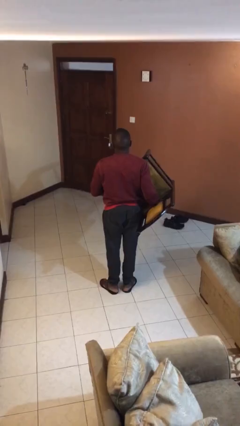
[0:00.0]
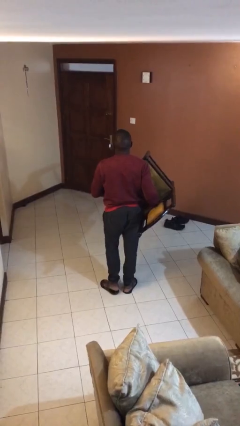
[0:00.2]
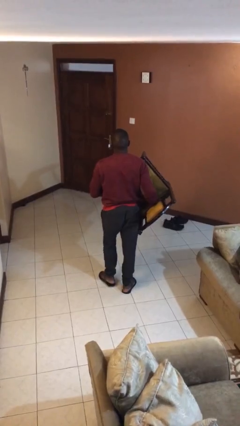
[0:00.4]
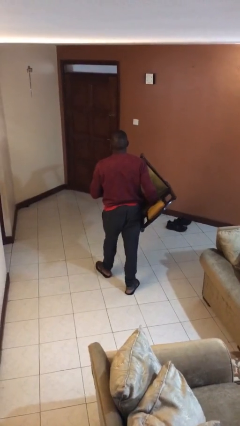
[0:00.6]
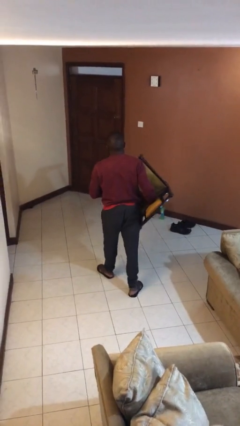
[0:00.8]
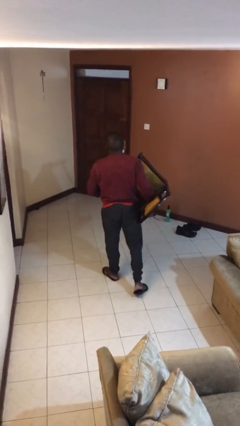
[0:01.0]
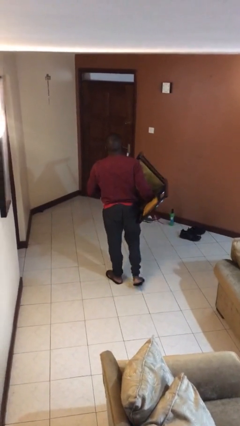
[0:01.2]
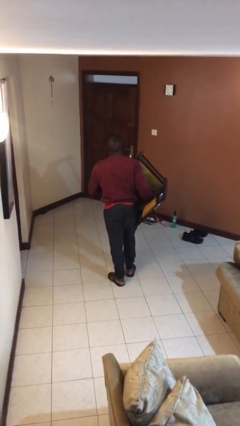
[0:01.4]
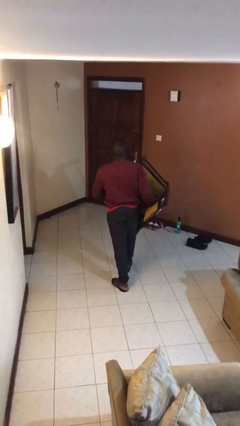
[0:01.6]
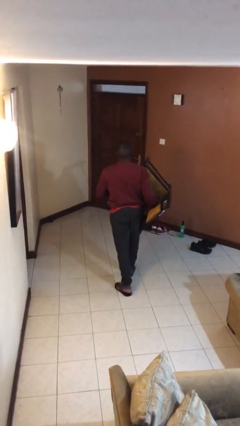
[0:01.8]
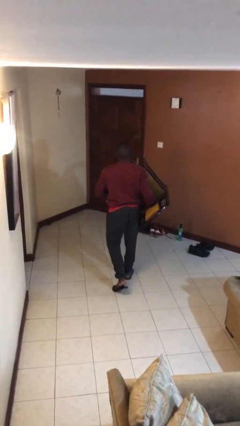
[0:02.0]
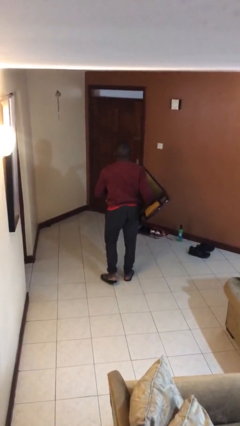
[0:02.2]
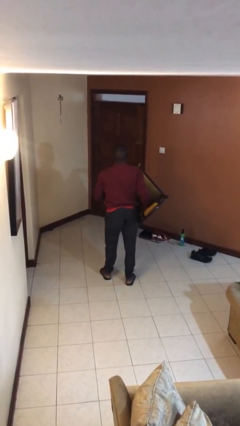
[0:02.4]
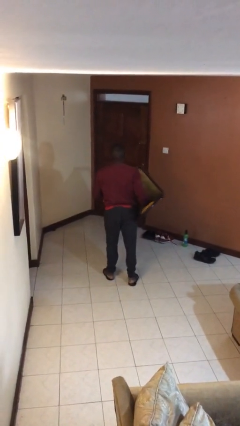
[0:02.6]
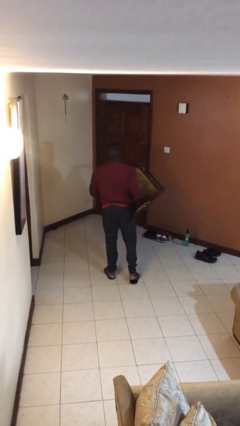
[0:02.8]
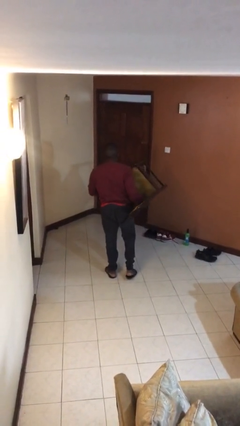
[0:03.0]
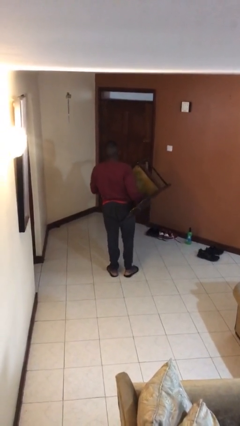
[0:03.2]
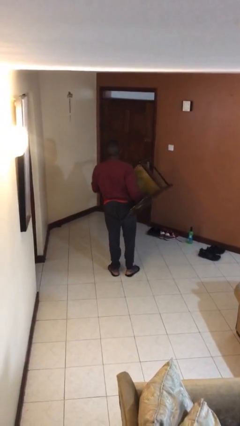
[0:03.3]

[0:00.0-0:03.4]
person carries furniture

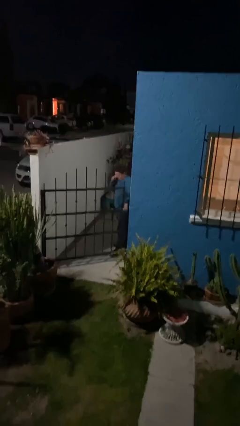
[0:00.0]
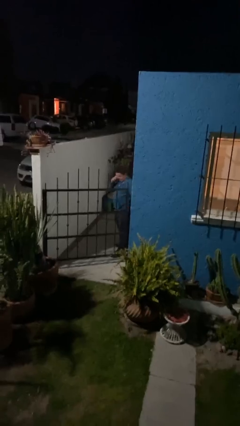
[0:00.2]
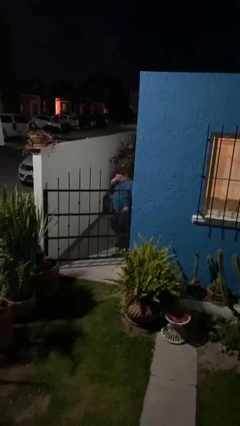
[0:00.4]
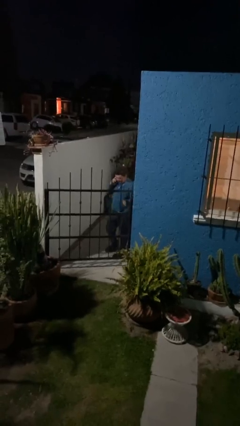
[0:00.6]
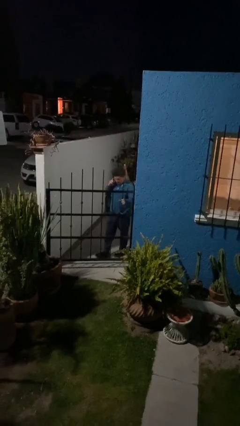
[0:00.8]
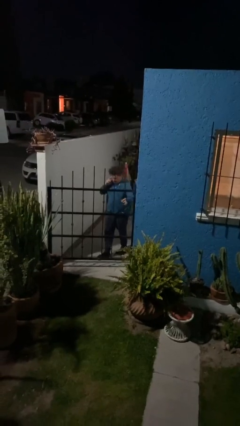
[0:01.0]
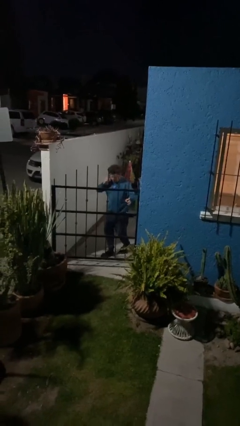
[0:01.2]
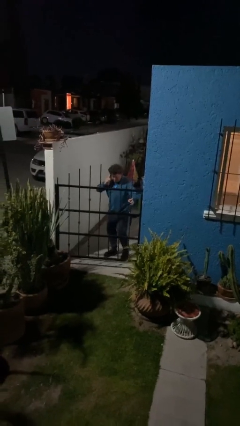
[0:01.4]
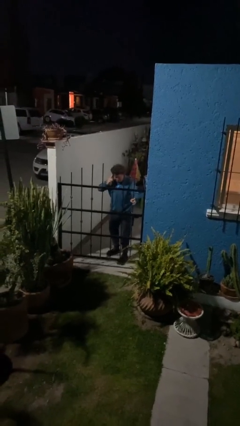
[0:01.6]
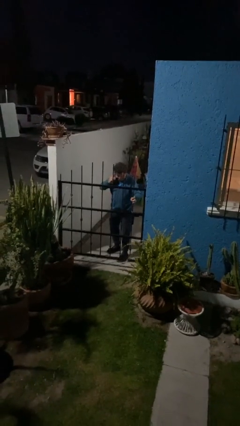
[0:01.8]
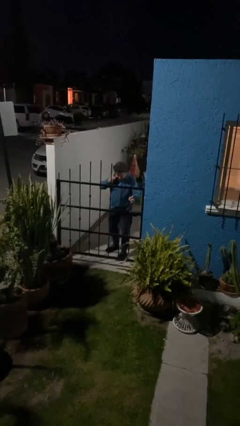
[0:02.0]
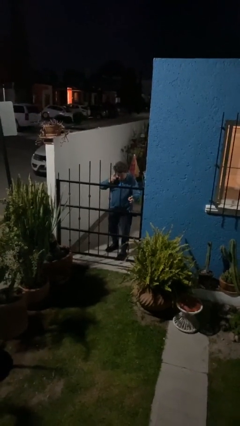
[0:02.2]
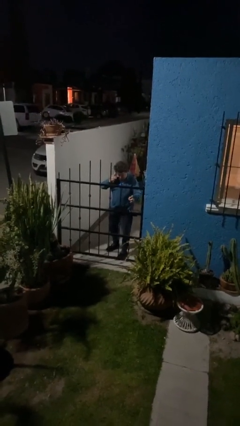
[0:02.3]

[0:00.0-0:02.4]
person closes facility door

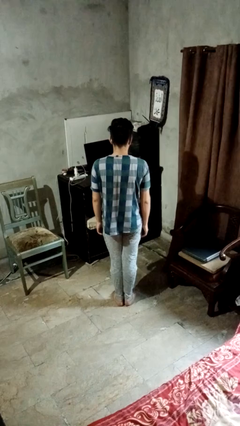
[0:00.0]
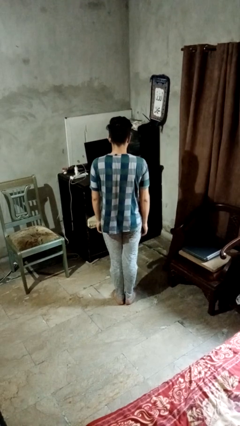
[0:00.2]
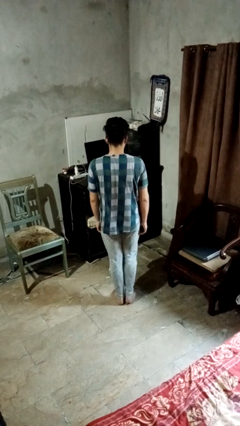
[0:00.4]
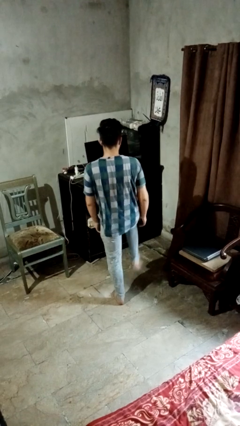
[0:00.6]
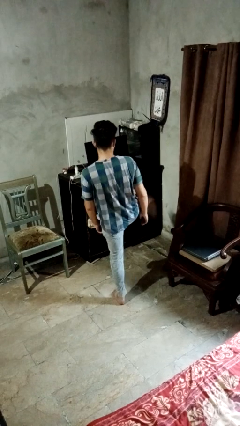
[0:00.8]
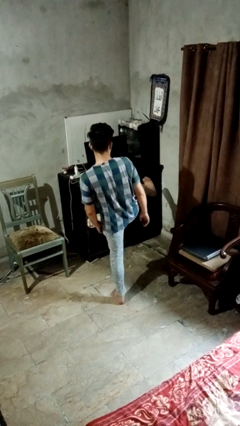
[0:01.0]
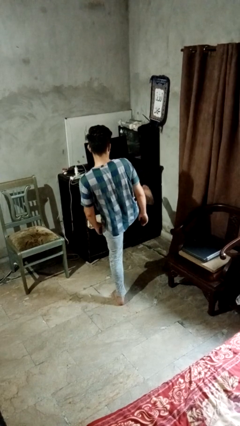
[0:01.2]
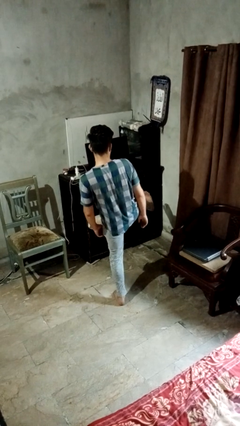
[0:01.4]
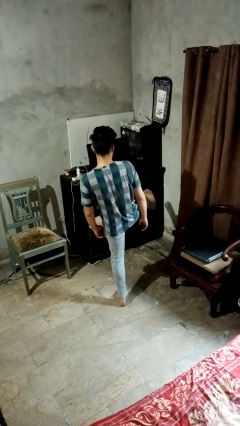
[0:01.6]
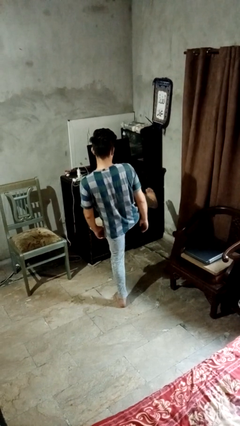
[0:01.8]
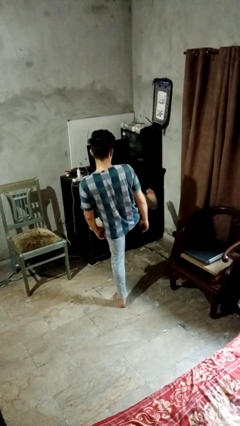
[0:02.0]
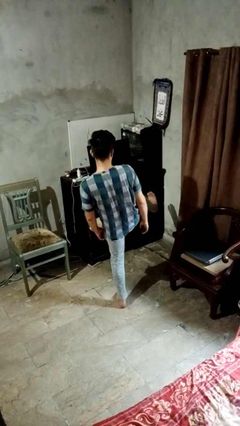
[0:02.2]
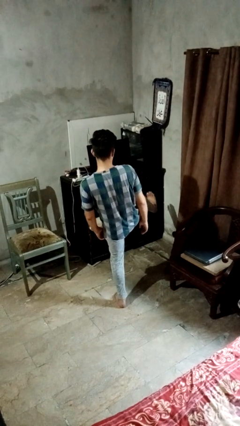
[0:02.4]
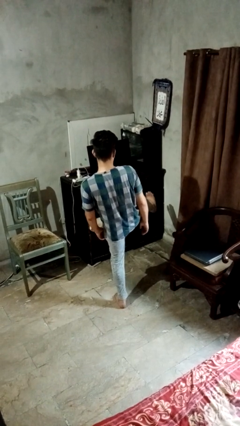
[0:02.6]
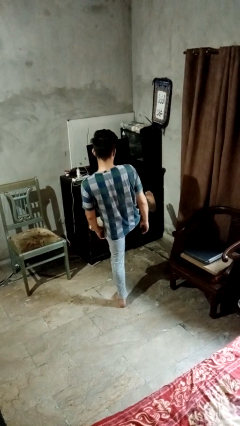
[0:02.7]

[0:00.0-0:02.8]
person karate kicks

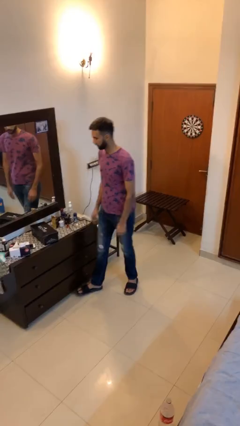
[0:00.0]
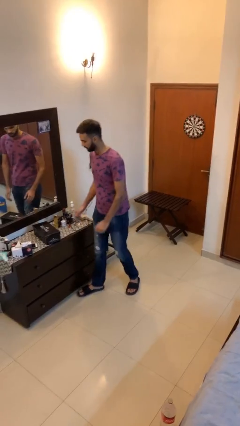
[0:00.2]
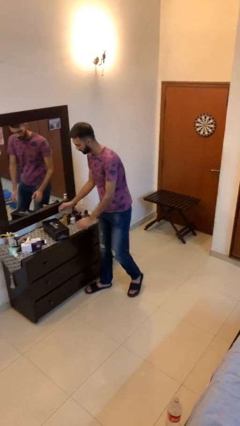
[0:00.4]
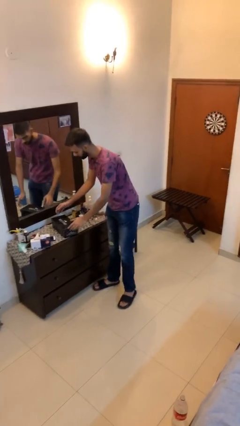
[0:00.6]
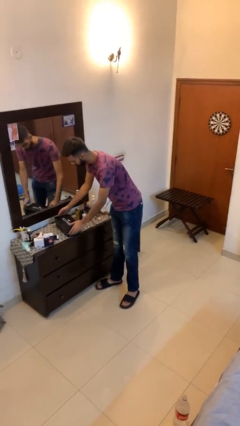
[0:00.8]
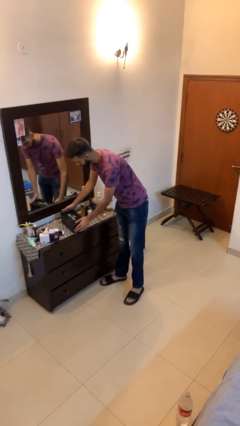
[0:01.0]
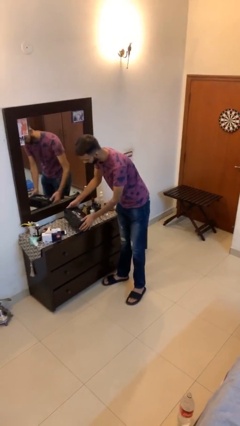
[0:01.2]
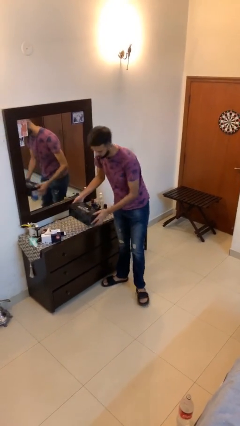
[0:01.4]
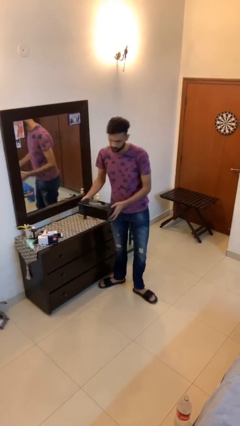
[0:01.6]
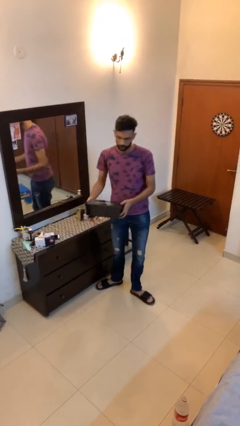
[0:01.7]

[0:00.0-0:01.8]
person picks up object from table

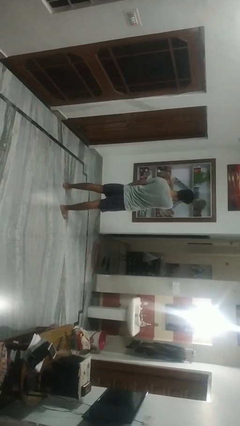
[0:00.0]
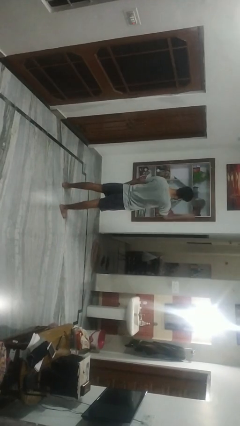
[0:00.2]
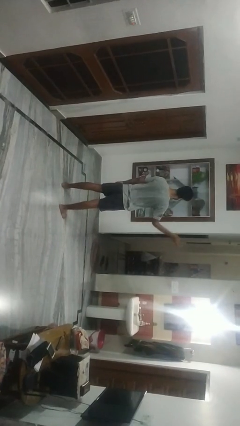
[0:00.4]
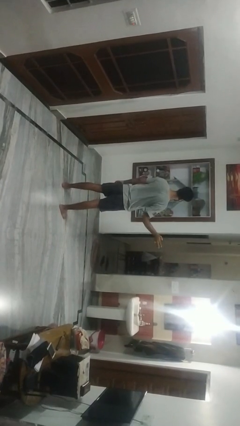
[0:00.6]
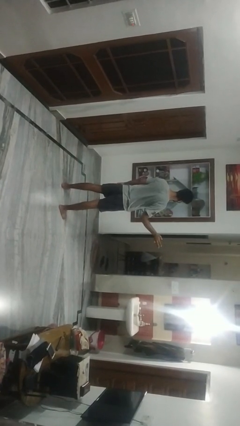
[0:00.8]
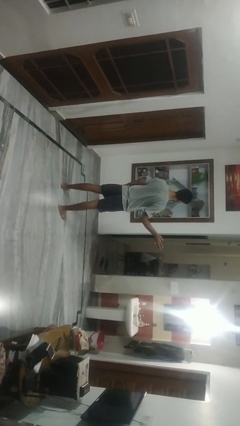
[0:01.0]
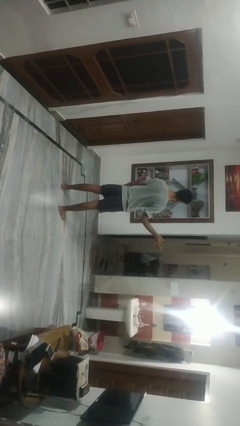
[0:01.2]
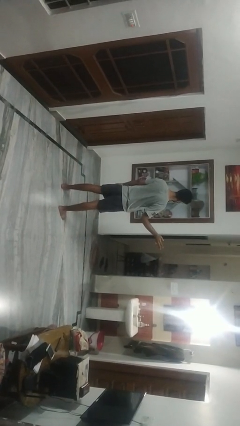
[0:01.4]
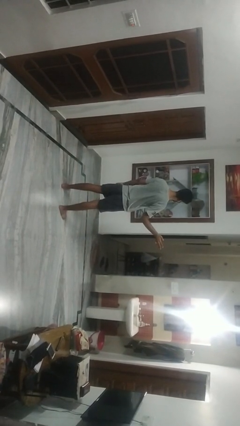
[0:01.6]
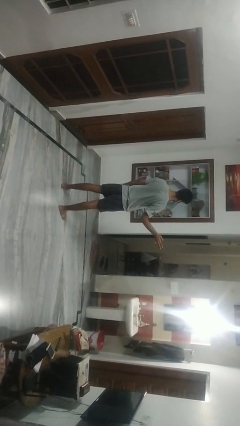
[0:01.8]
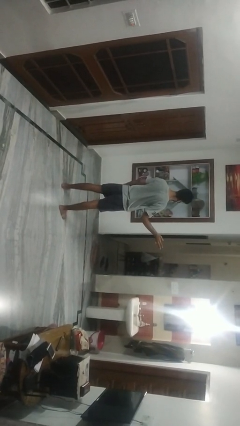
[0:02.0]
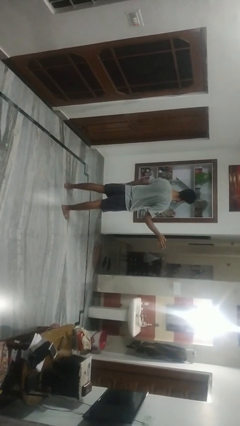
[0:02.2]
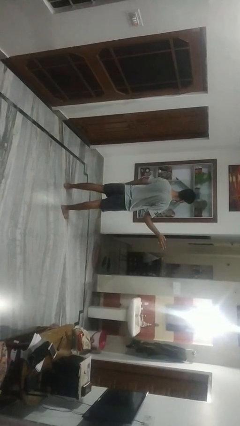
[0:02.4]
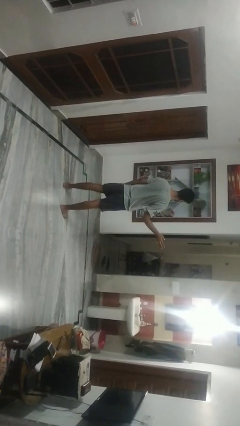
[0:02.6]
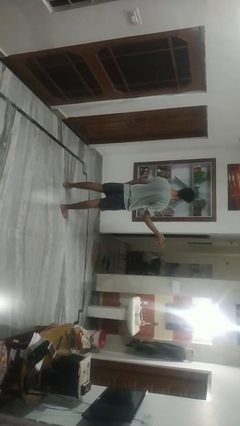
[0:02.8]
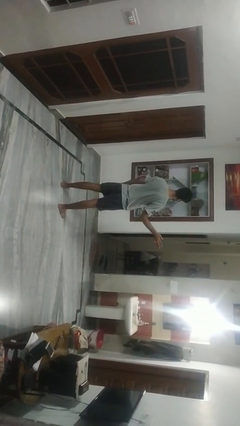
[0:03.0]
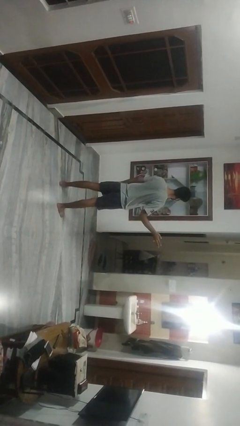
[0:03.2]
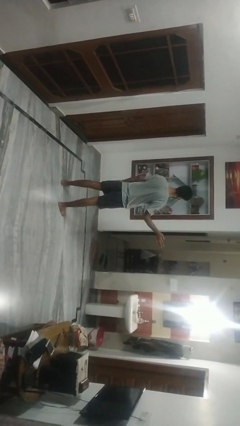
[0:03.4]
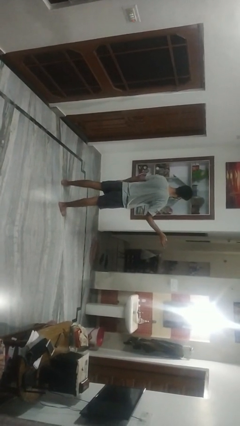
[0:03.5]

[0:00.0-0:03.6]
person gestures swipe right

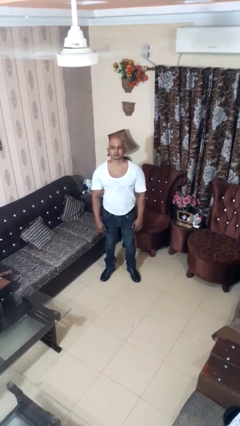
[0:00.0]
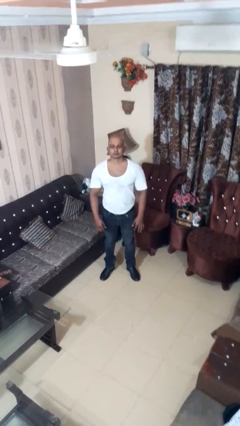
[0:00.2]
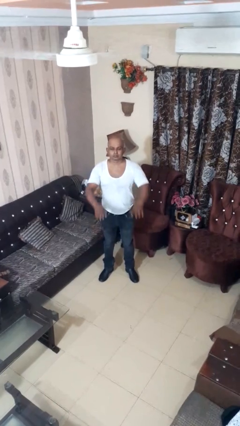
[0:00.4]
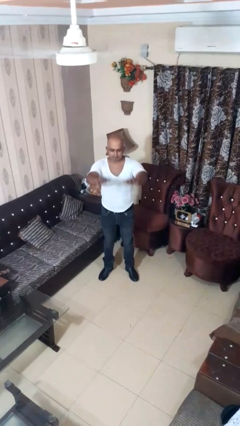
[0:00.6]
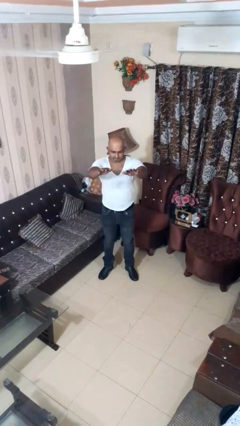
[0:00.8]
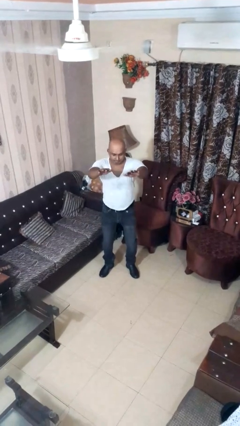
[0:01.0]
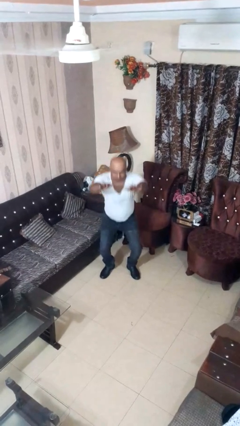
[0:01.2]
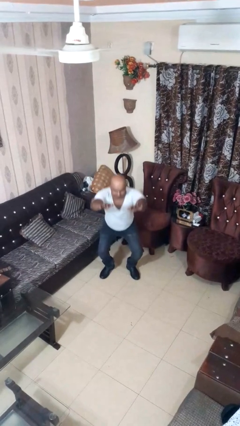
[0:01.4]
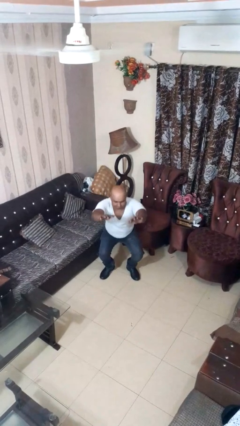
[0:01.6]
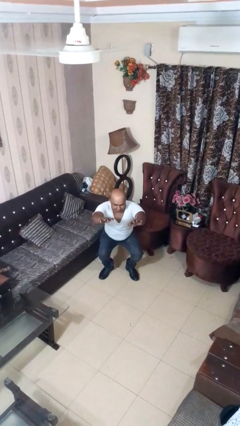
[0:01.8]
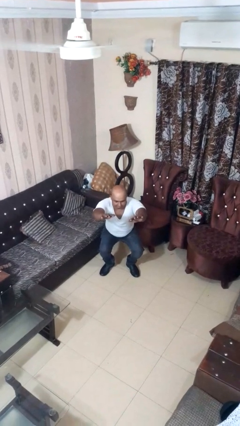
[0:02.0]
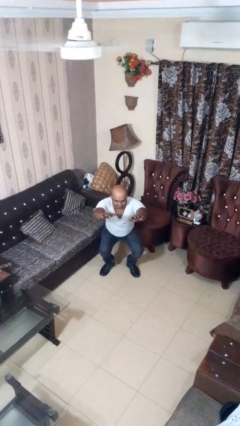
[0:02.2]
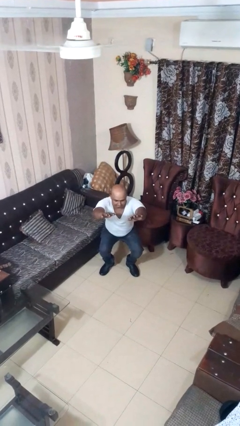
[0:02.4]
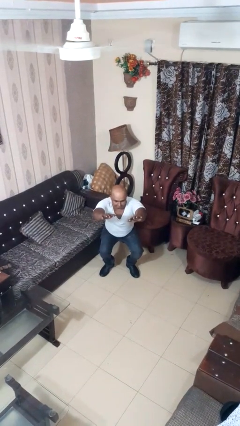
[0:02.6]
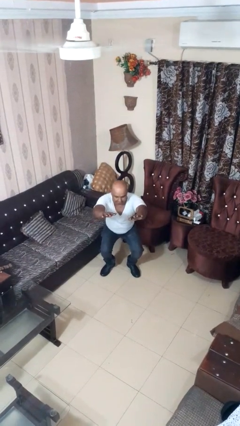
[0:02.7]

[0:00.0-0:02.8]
person squats

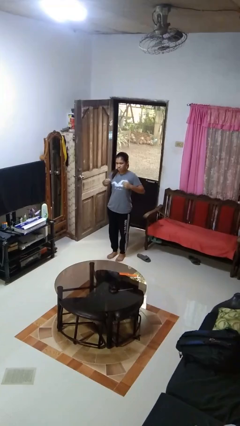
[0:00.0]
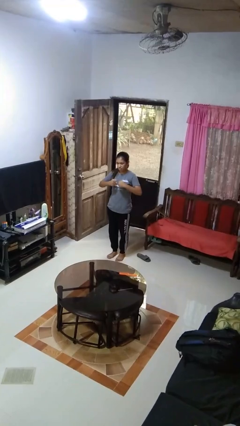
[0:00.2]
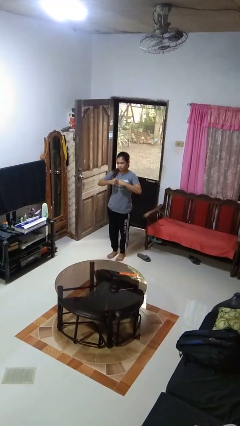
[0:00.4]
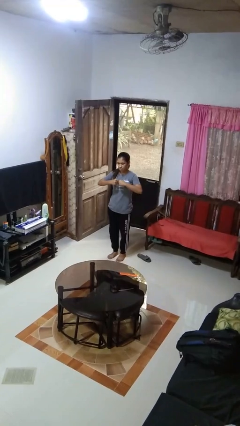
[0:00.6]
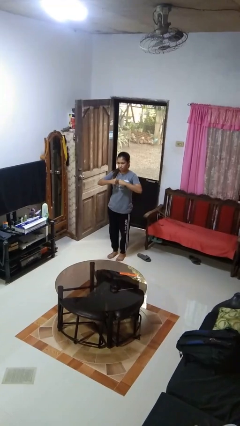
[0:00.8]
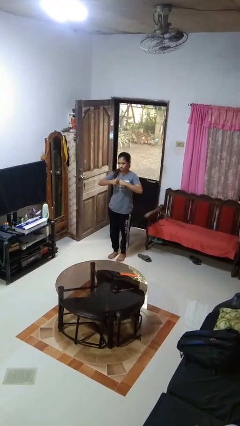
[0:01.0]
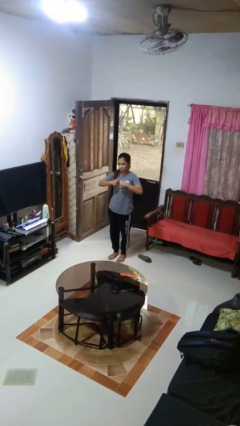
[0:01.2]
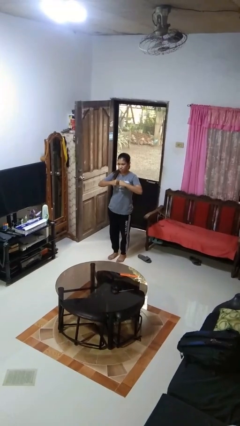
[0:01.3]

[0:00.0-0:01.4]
person gestures zoom out
